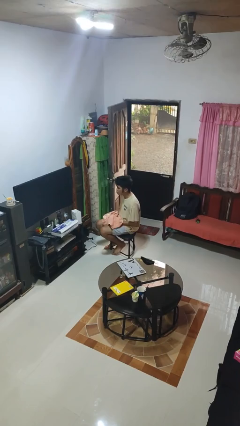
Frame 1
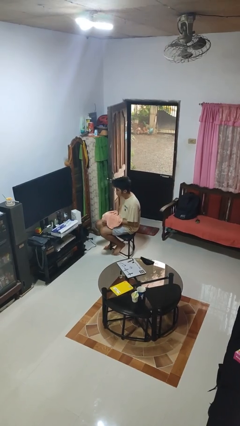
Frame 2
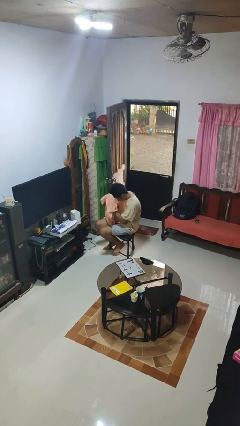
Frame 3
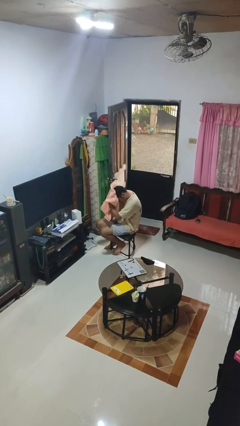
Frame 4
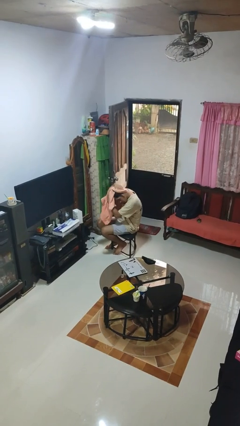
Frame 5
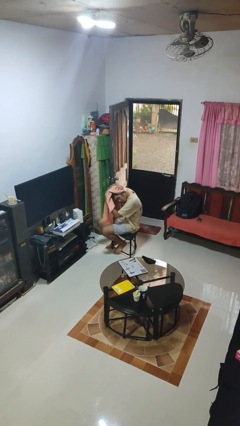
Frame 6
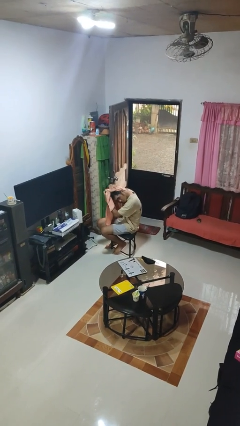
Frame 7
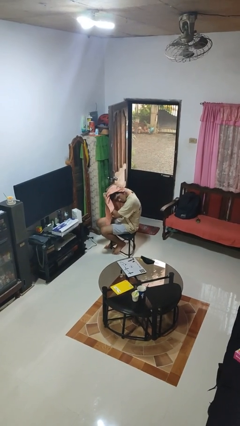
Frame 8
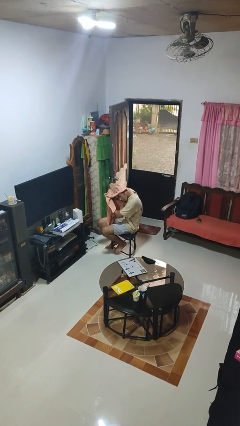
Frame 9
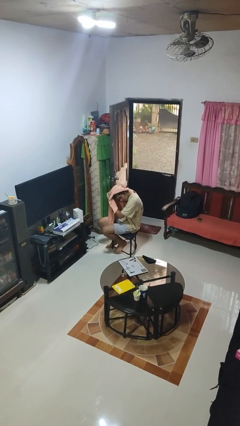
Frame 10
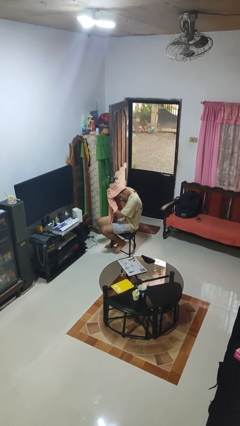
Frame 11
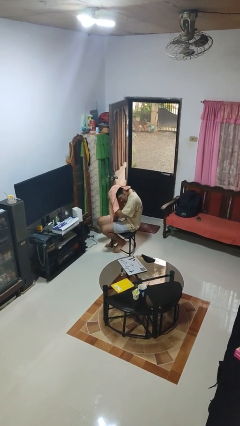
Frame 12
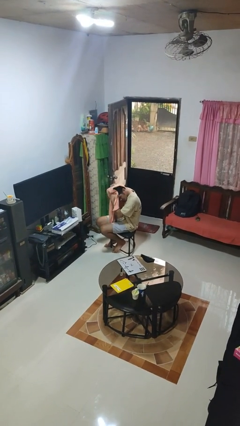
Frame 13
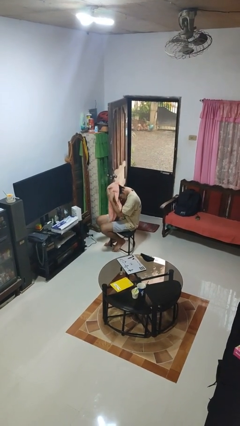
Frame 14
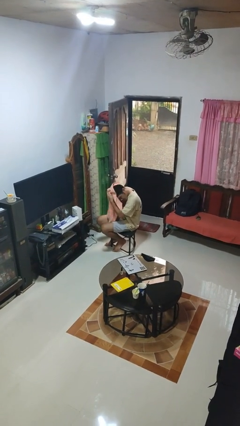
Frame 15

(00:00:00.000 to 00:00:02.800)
person dries hair with towel

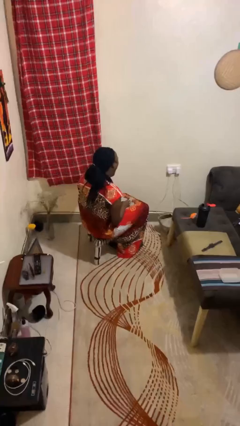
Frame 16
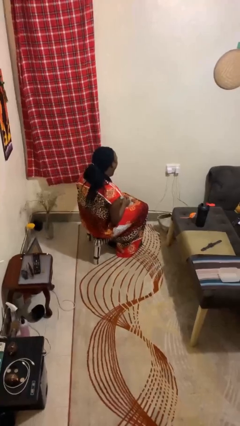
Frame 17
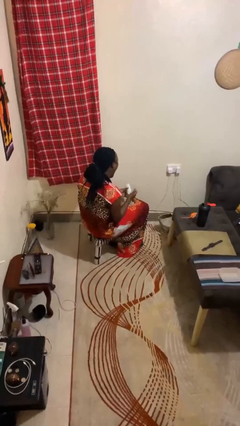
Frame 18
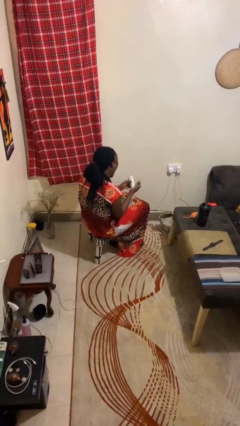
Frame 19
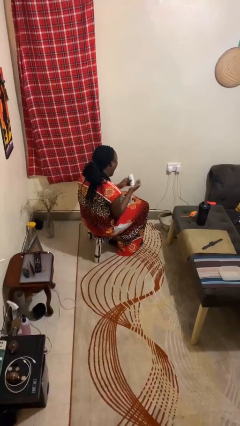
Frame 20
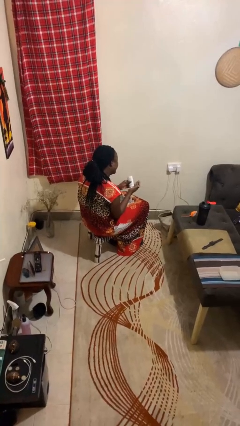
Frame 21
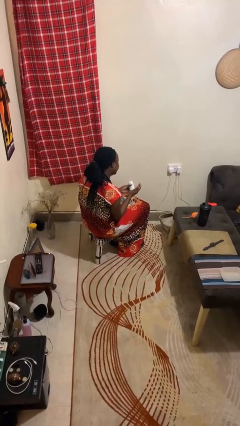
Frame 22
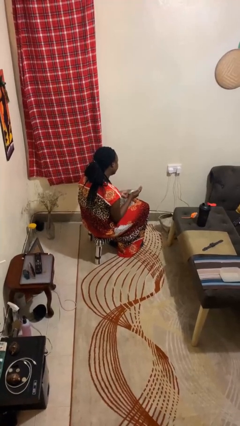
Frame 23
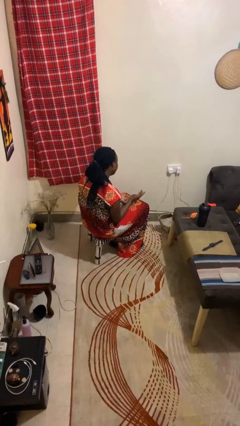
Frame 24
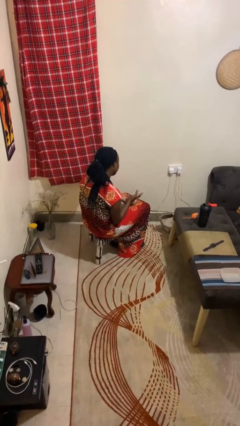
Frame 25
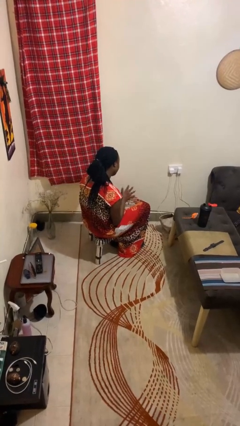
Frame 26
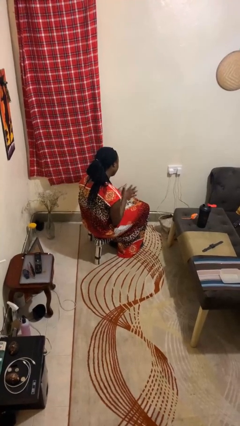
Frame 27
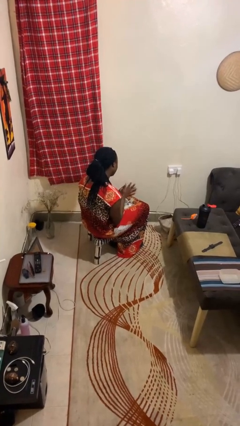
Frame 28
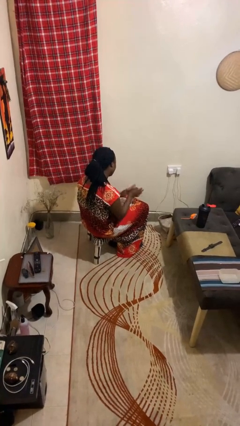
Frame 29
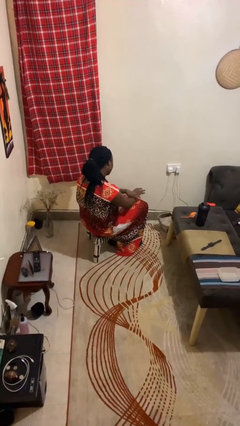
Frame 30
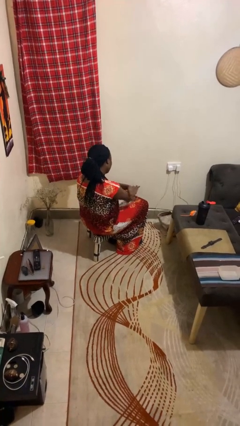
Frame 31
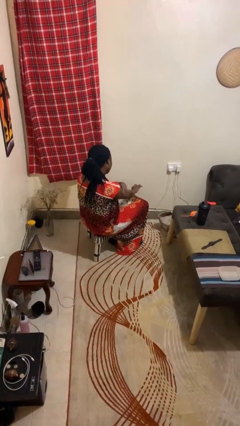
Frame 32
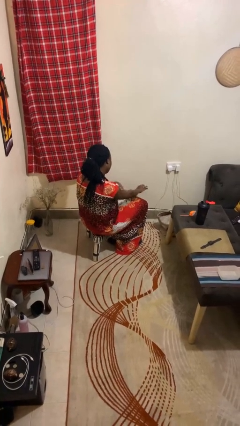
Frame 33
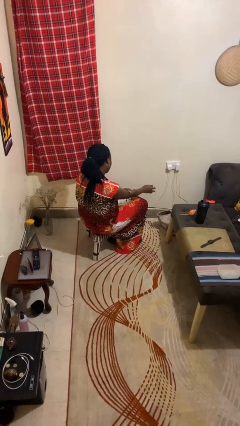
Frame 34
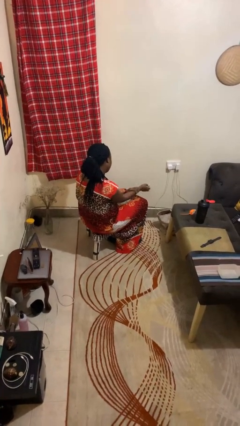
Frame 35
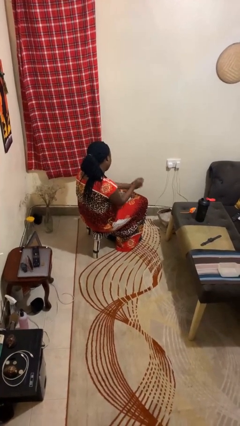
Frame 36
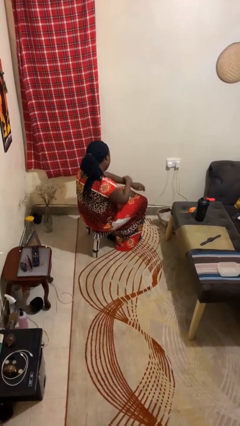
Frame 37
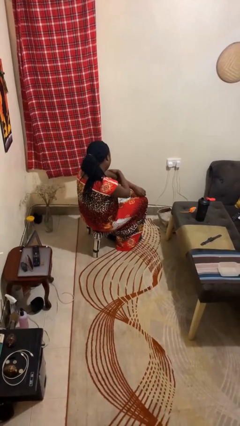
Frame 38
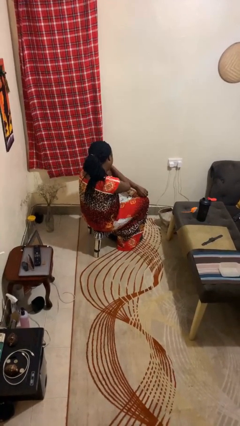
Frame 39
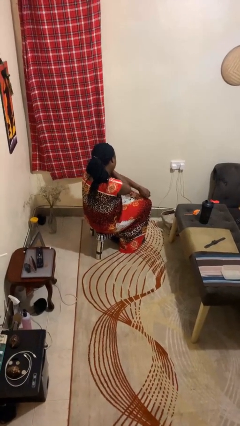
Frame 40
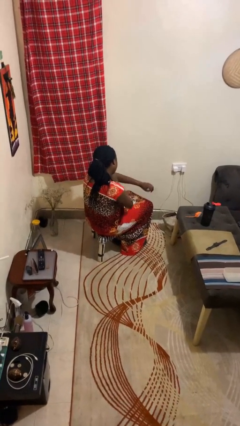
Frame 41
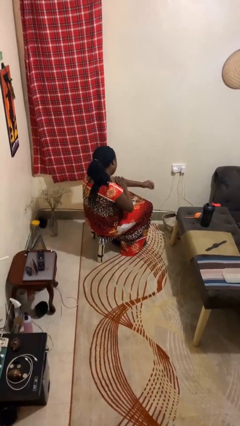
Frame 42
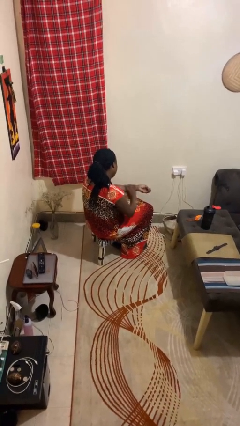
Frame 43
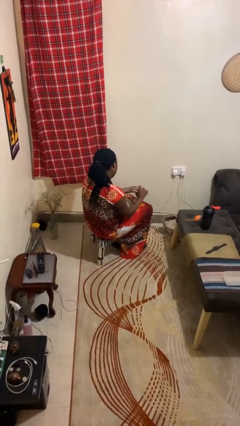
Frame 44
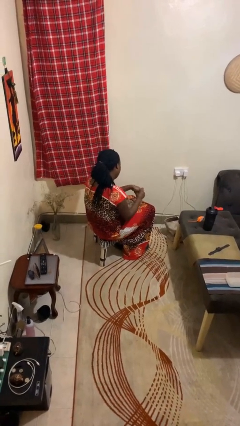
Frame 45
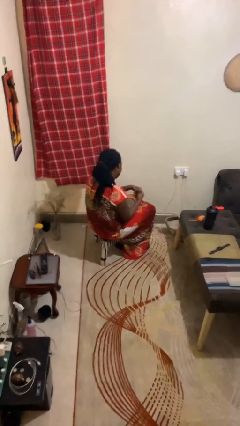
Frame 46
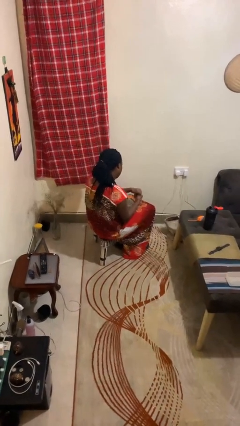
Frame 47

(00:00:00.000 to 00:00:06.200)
person applies sunscreen

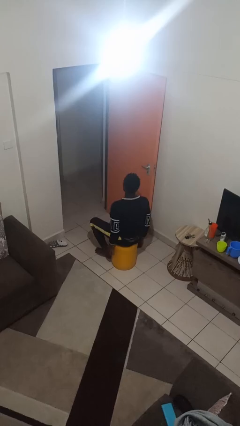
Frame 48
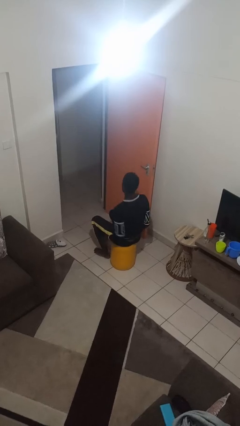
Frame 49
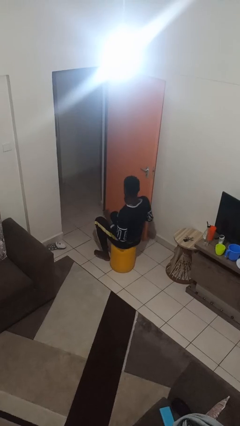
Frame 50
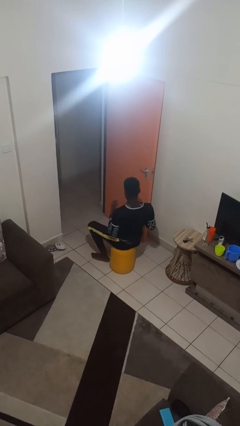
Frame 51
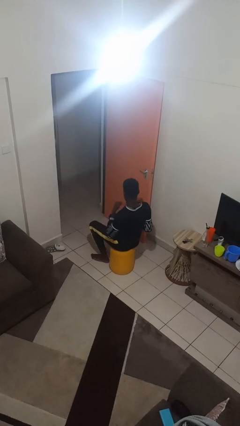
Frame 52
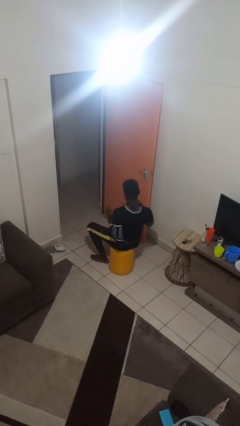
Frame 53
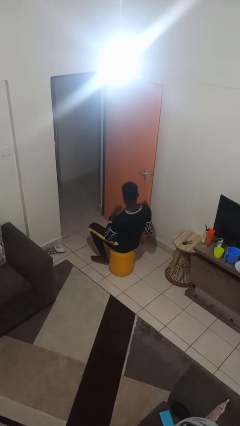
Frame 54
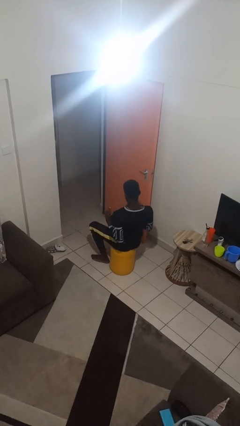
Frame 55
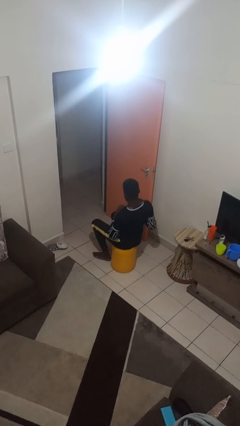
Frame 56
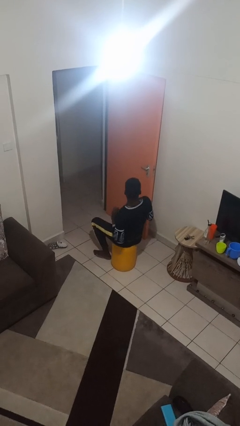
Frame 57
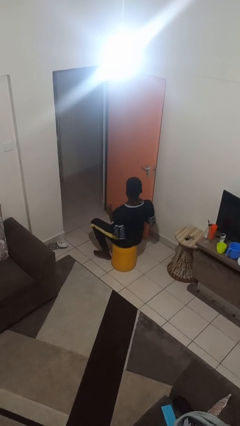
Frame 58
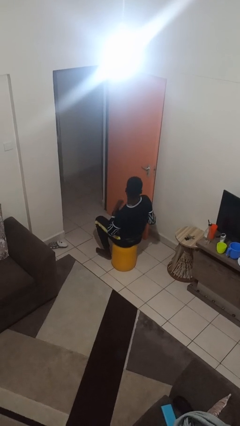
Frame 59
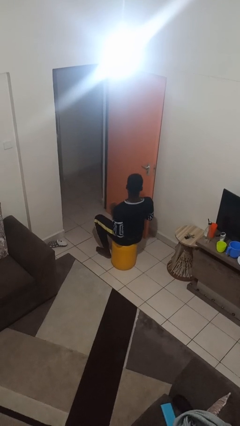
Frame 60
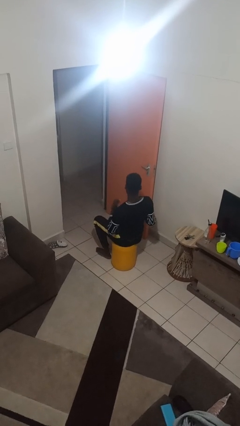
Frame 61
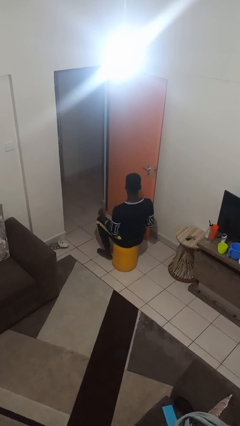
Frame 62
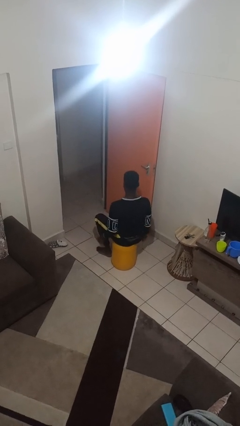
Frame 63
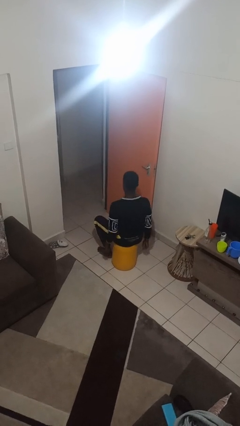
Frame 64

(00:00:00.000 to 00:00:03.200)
person drums on chest

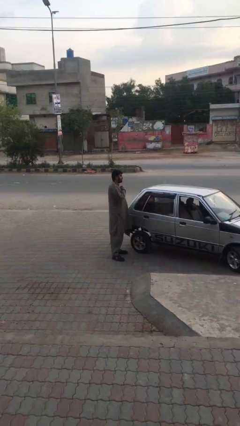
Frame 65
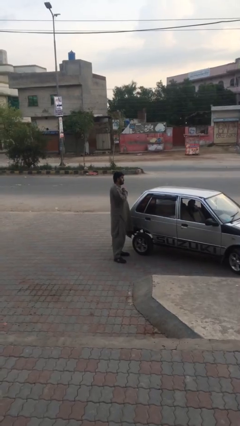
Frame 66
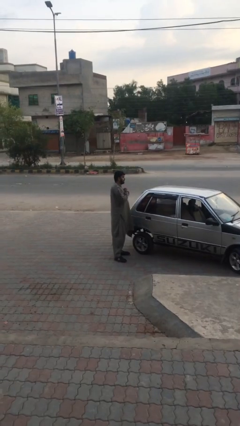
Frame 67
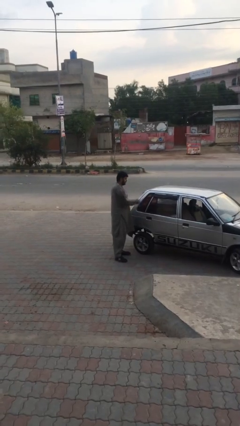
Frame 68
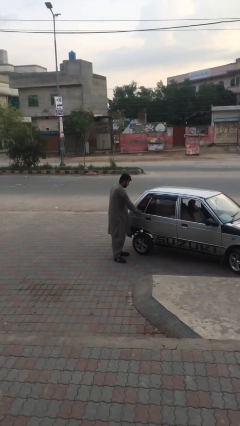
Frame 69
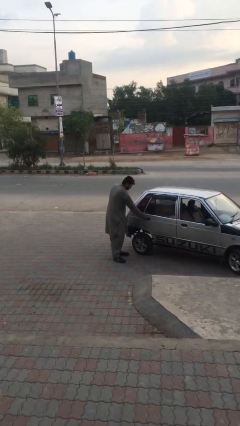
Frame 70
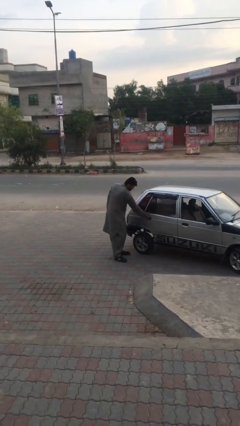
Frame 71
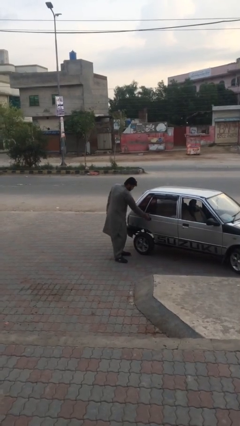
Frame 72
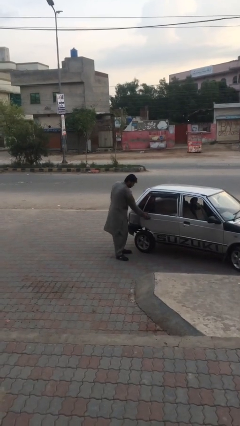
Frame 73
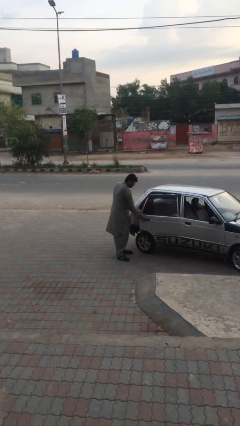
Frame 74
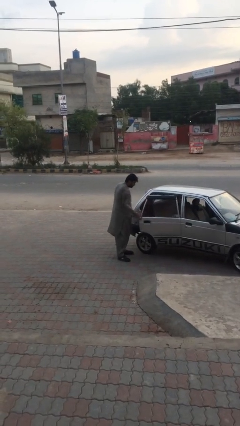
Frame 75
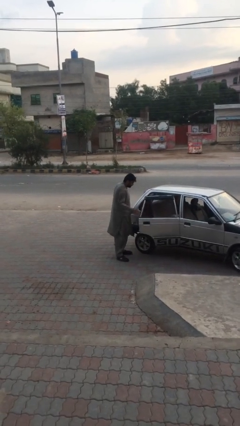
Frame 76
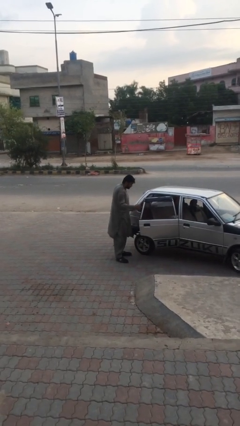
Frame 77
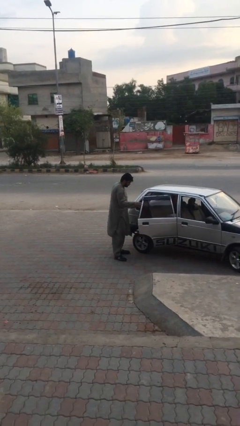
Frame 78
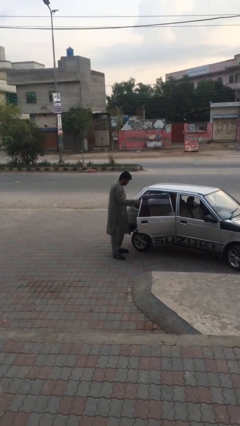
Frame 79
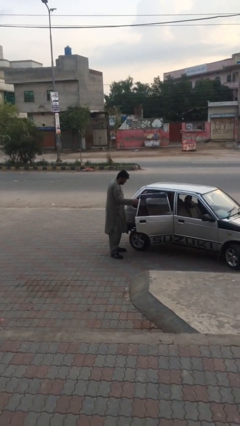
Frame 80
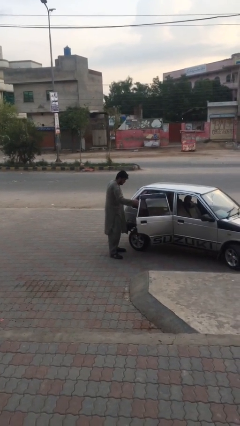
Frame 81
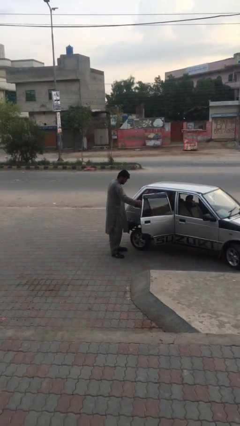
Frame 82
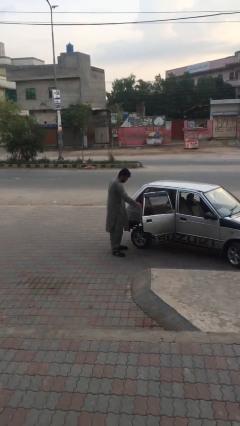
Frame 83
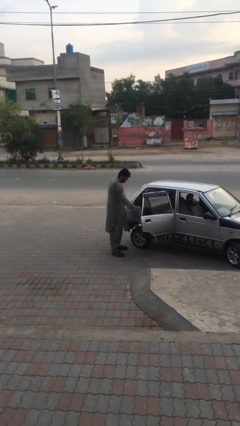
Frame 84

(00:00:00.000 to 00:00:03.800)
person opens car door

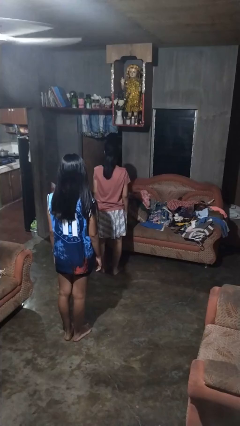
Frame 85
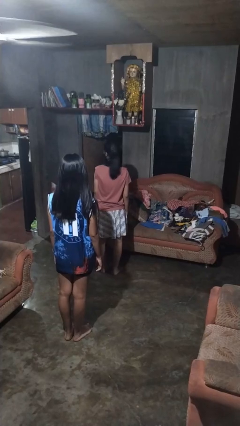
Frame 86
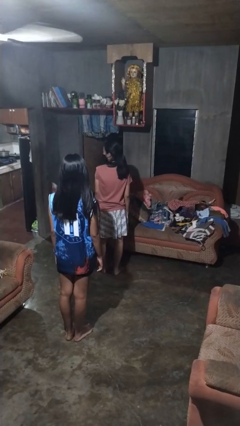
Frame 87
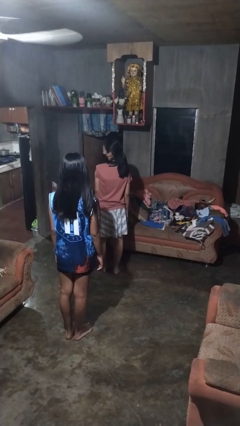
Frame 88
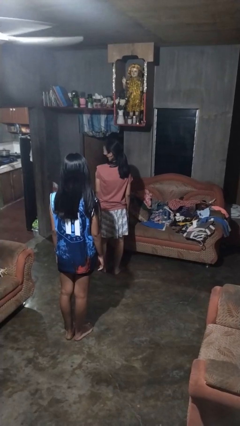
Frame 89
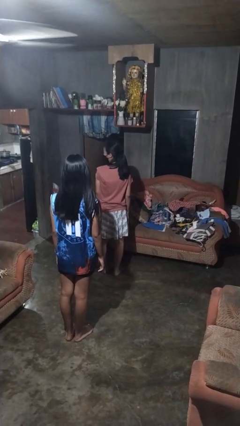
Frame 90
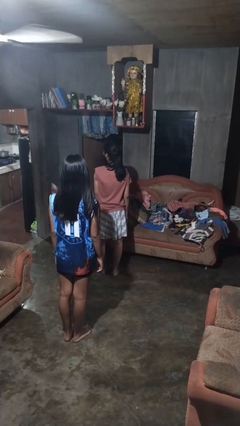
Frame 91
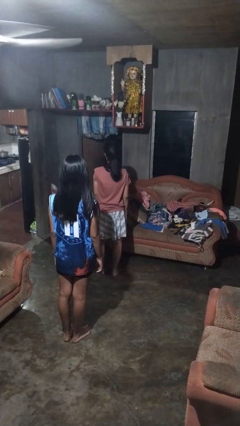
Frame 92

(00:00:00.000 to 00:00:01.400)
person looks over shoulder
